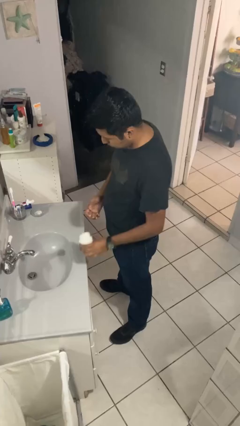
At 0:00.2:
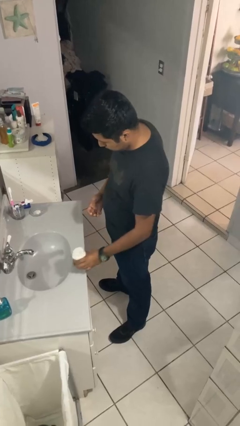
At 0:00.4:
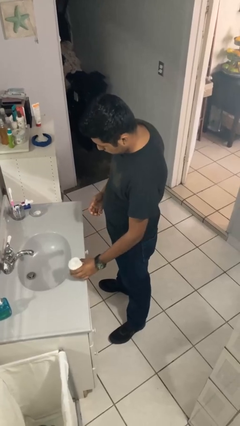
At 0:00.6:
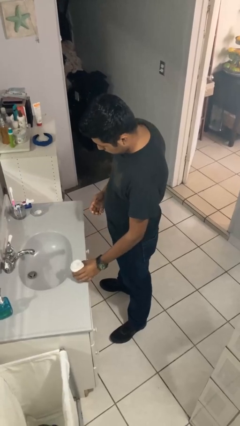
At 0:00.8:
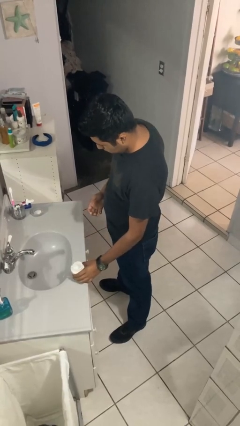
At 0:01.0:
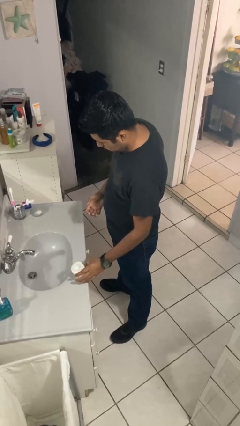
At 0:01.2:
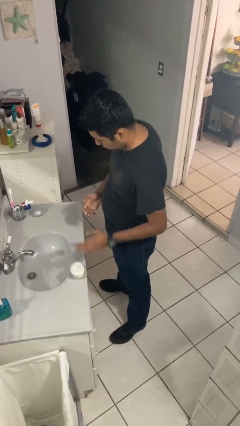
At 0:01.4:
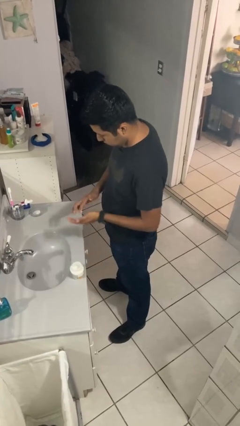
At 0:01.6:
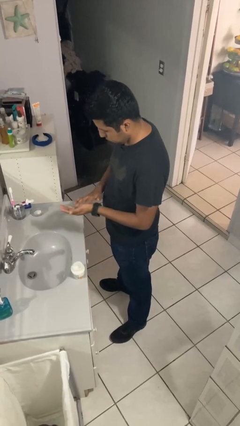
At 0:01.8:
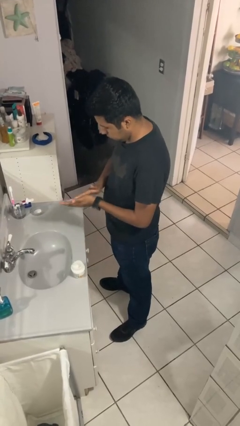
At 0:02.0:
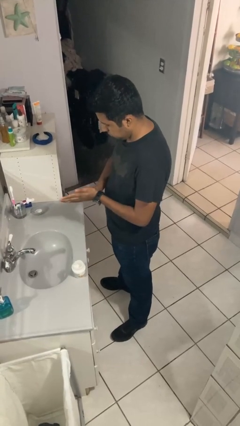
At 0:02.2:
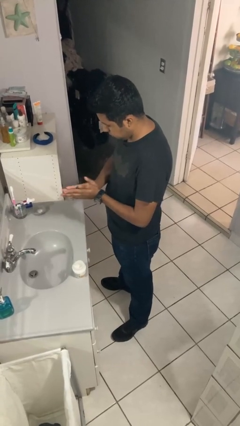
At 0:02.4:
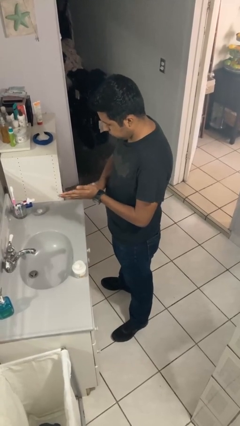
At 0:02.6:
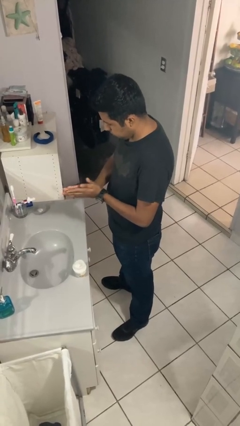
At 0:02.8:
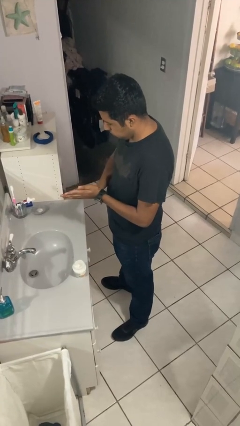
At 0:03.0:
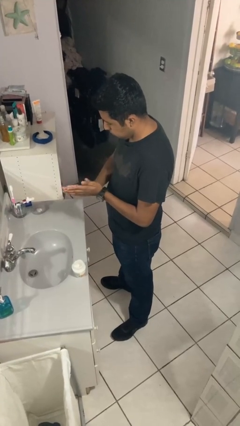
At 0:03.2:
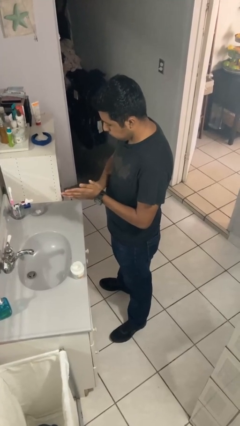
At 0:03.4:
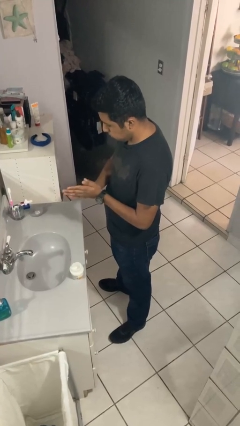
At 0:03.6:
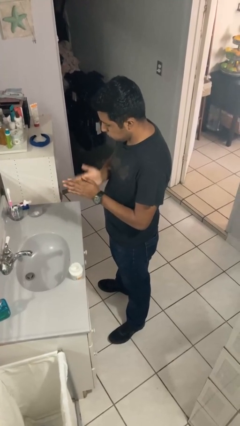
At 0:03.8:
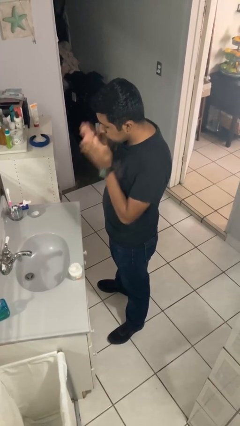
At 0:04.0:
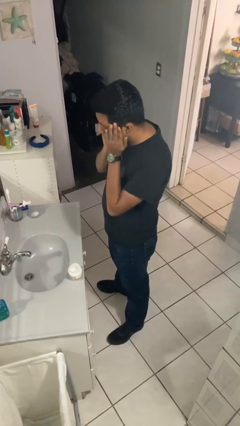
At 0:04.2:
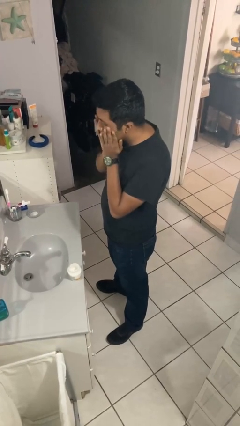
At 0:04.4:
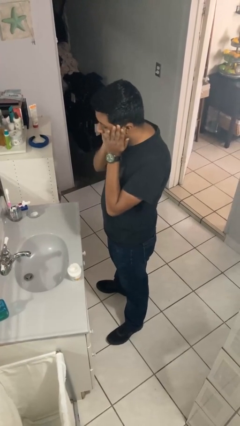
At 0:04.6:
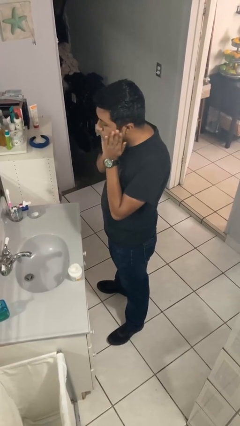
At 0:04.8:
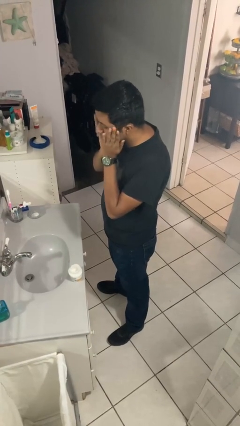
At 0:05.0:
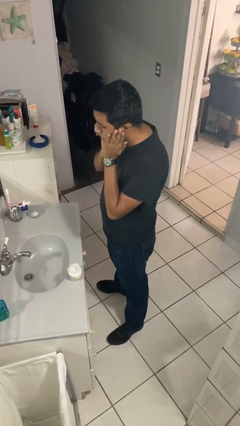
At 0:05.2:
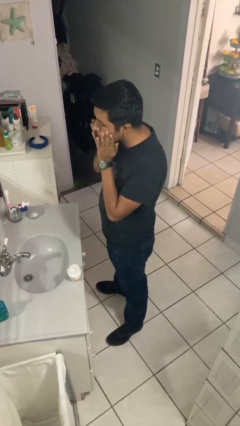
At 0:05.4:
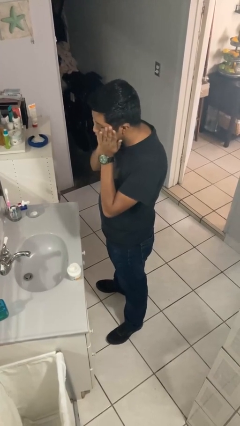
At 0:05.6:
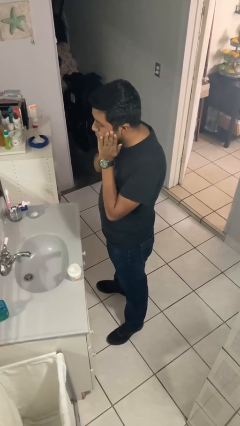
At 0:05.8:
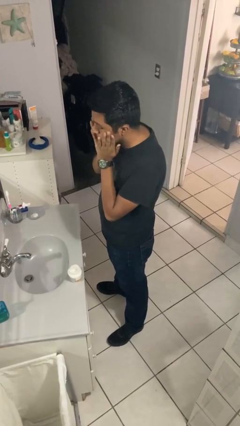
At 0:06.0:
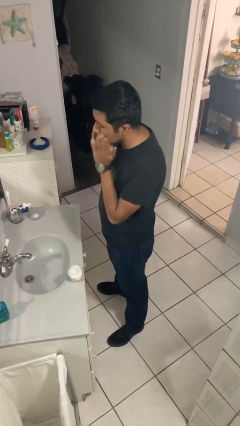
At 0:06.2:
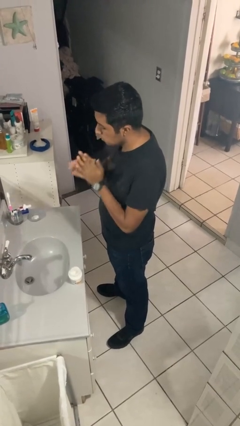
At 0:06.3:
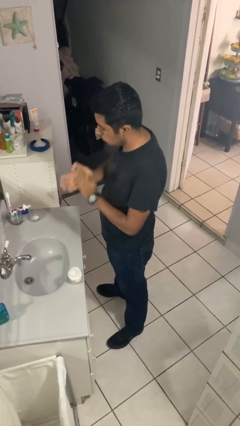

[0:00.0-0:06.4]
person applies facial moisturizer

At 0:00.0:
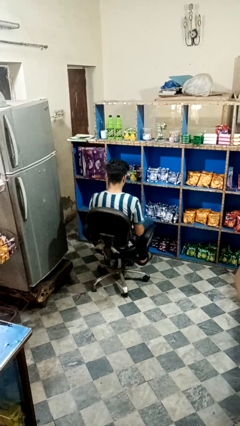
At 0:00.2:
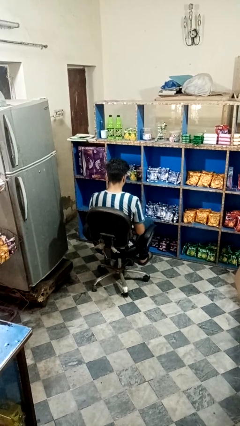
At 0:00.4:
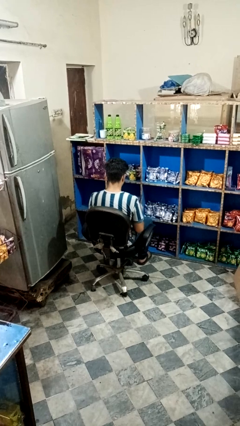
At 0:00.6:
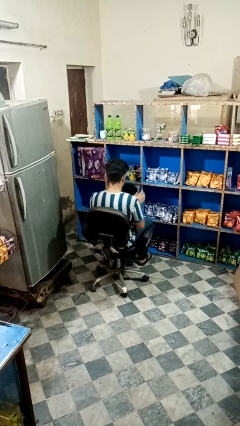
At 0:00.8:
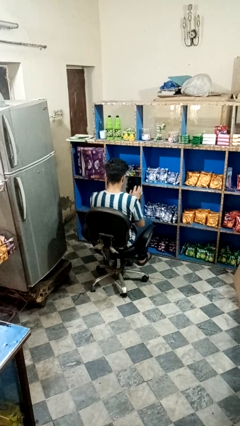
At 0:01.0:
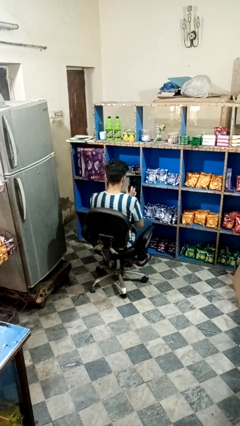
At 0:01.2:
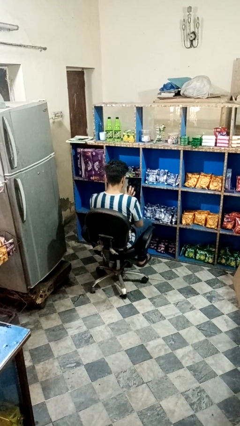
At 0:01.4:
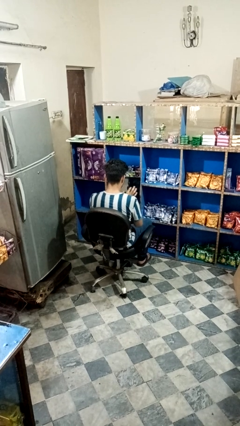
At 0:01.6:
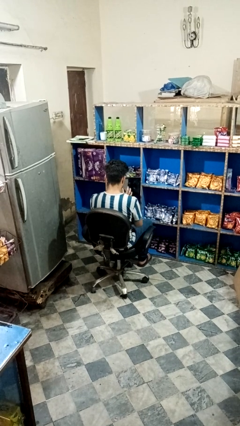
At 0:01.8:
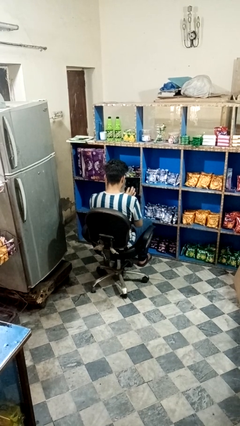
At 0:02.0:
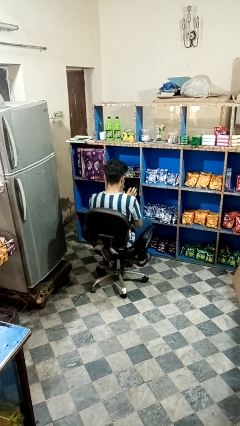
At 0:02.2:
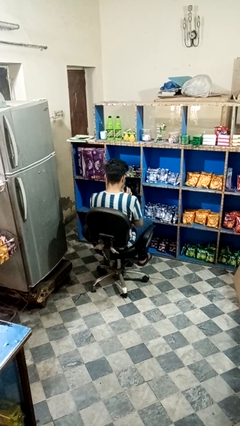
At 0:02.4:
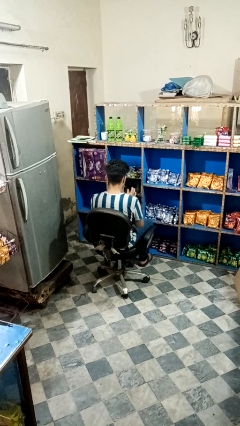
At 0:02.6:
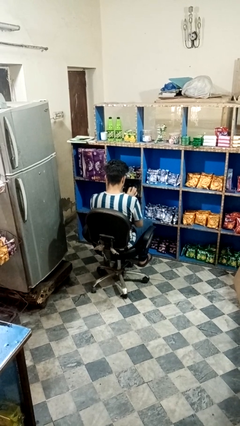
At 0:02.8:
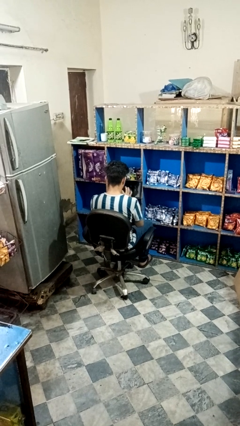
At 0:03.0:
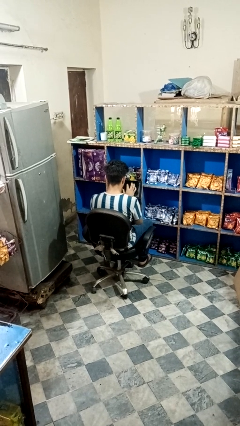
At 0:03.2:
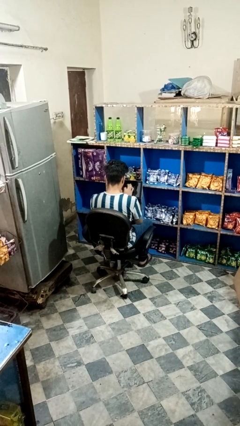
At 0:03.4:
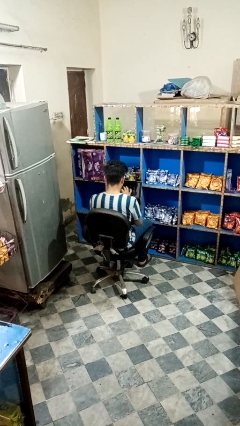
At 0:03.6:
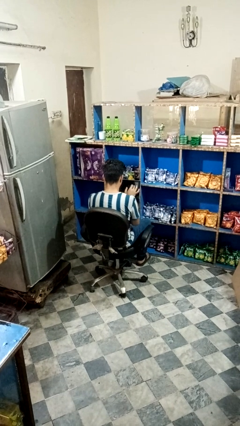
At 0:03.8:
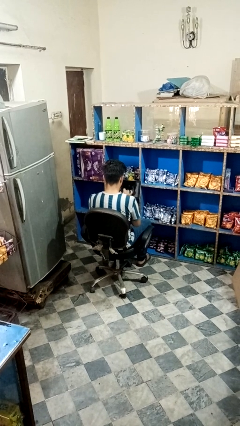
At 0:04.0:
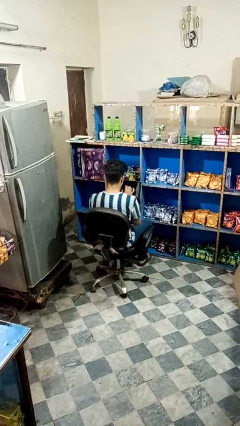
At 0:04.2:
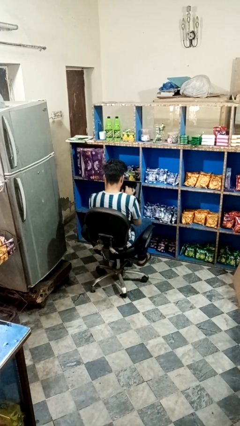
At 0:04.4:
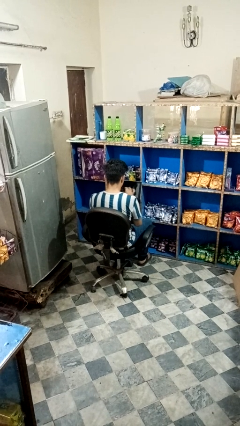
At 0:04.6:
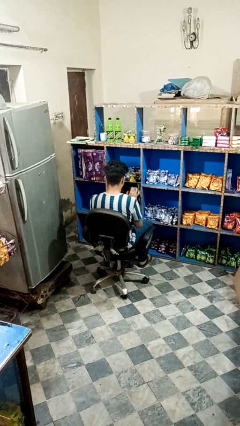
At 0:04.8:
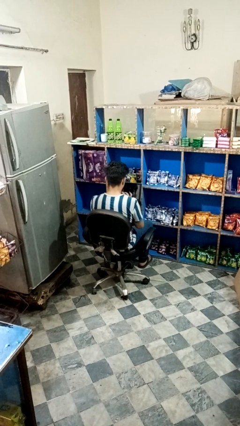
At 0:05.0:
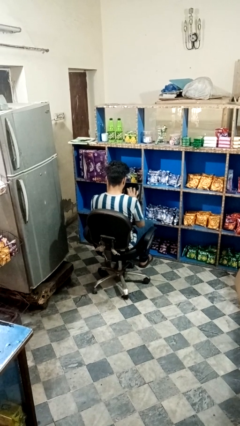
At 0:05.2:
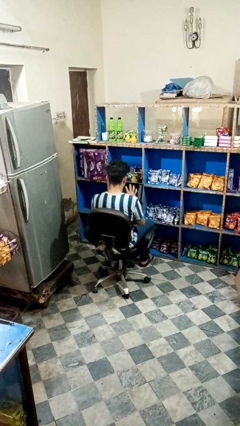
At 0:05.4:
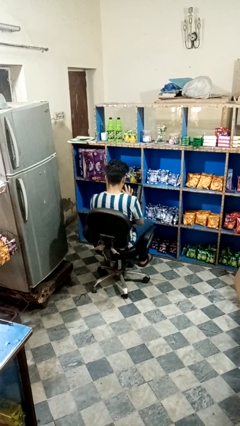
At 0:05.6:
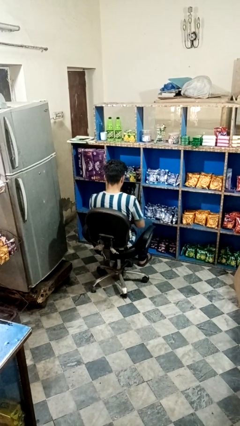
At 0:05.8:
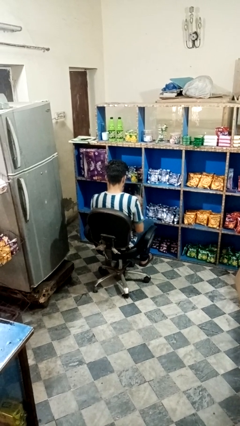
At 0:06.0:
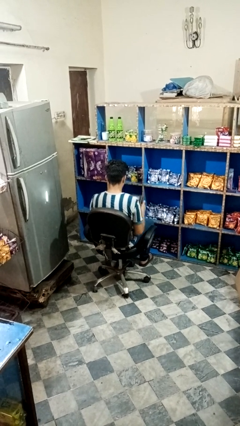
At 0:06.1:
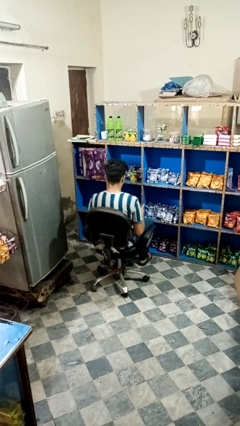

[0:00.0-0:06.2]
person interacts with tablet

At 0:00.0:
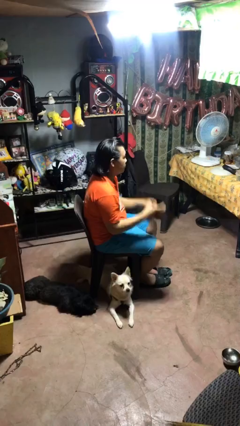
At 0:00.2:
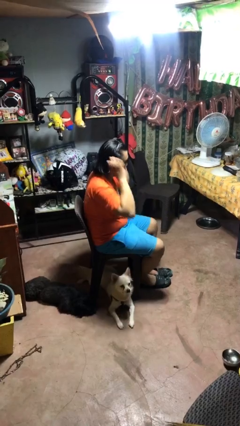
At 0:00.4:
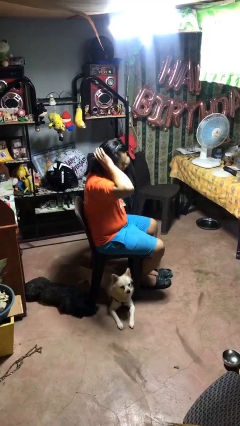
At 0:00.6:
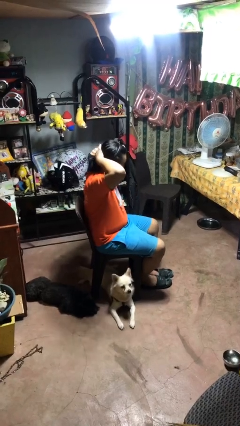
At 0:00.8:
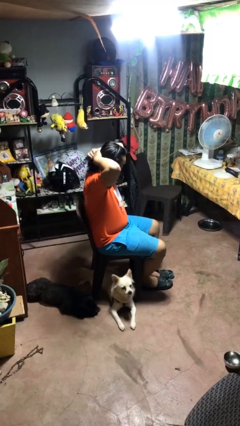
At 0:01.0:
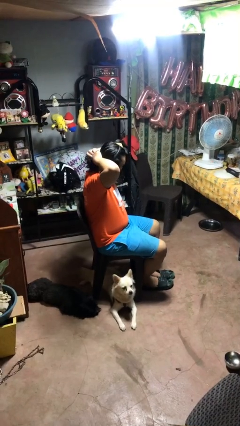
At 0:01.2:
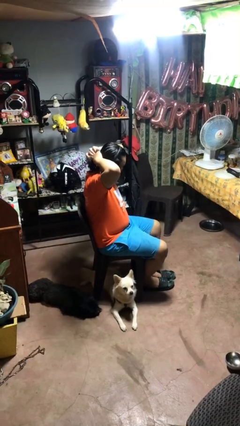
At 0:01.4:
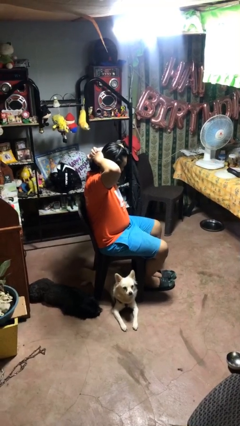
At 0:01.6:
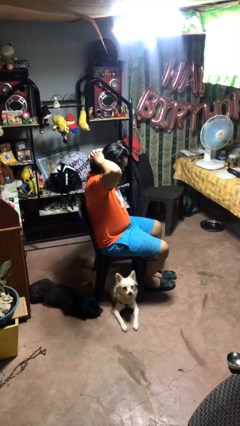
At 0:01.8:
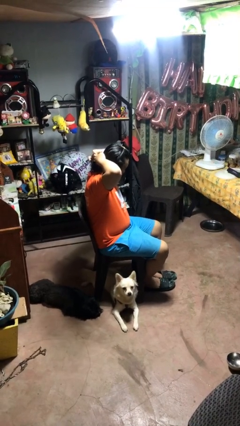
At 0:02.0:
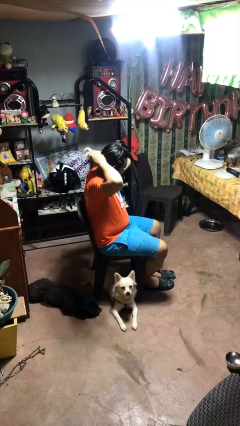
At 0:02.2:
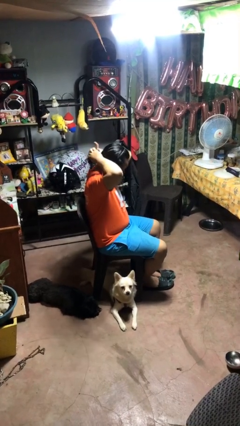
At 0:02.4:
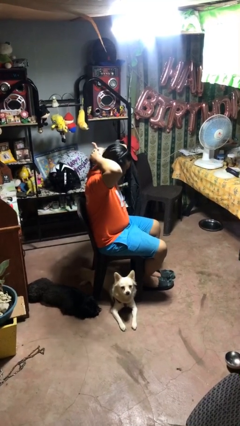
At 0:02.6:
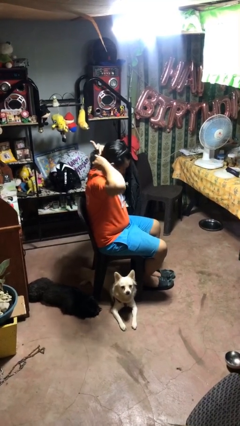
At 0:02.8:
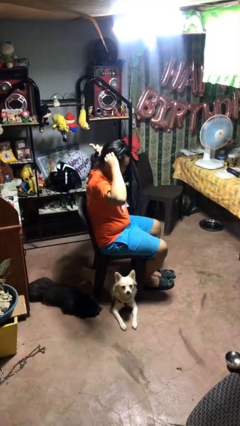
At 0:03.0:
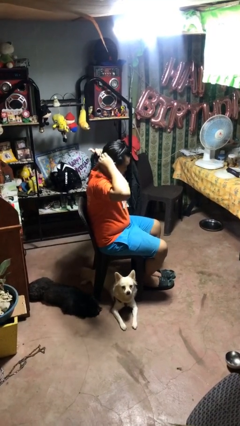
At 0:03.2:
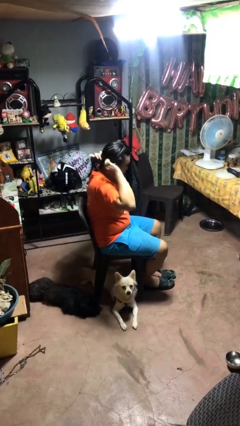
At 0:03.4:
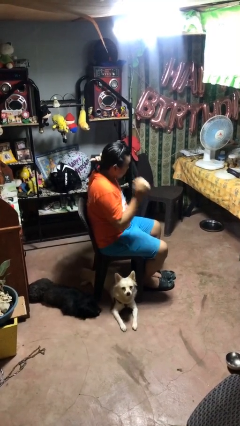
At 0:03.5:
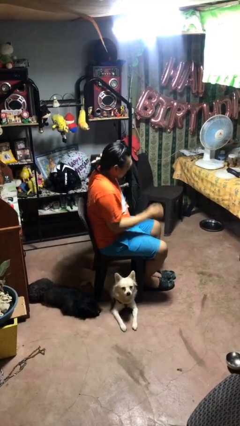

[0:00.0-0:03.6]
person puts hair in ponytail

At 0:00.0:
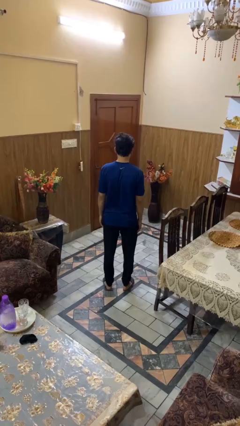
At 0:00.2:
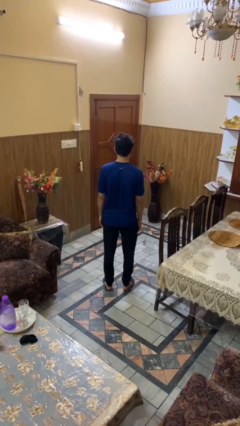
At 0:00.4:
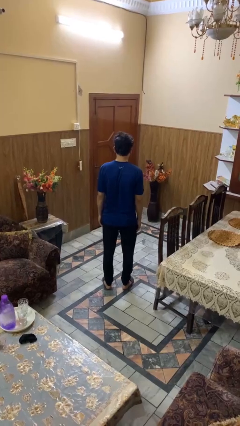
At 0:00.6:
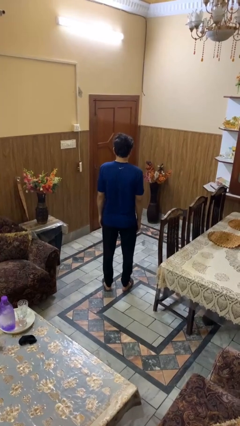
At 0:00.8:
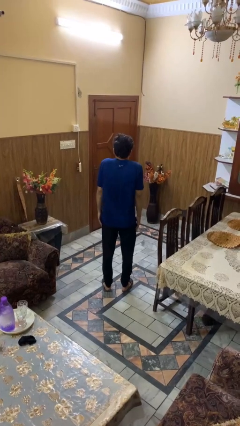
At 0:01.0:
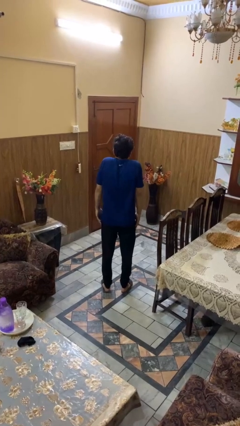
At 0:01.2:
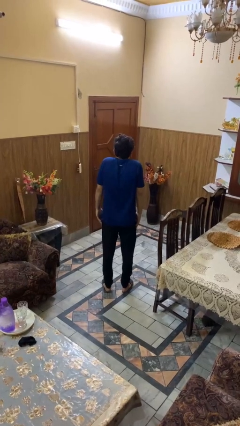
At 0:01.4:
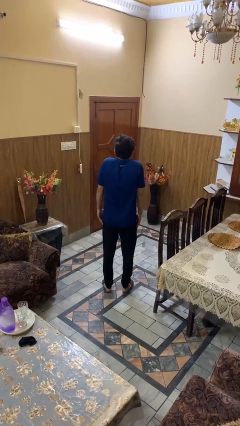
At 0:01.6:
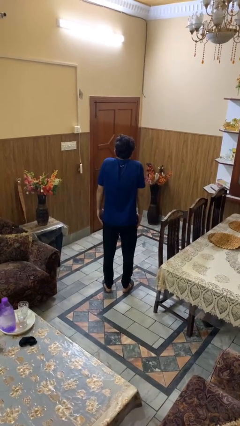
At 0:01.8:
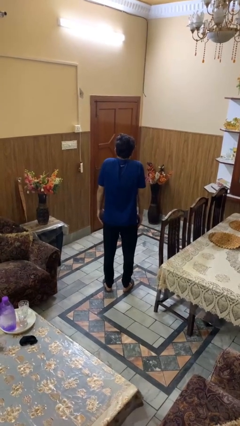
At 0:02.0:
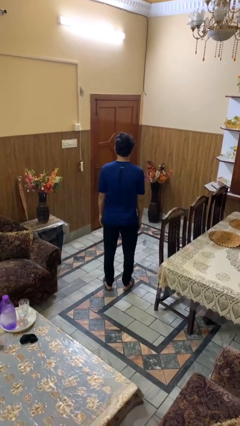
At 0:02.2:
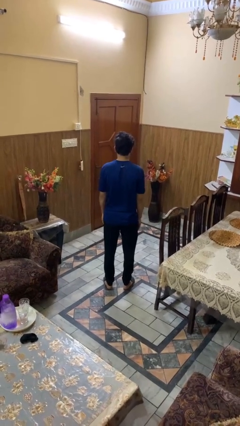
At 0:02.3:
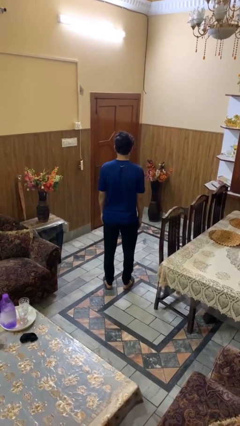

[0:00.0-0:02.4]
person shrugs
